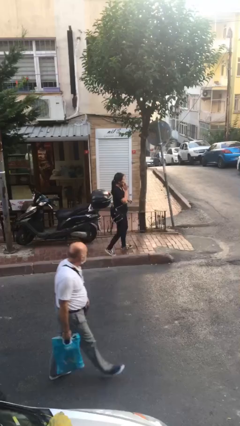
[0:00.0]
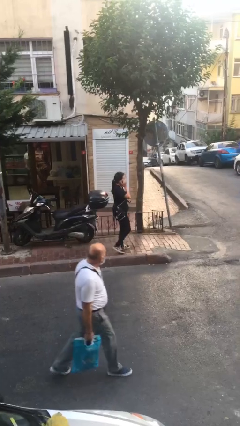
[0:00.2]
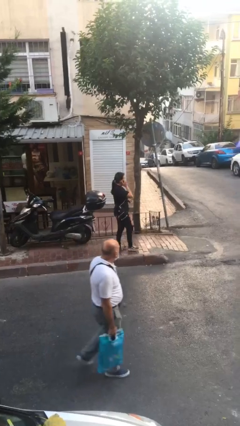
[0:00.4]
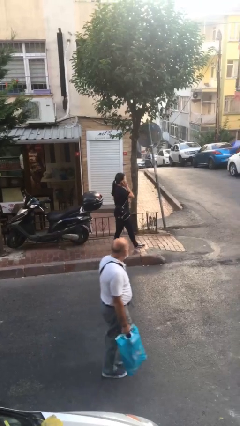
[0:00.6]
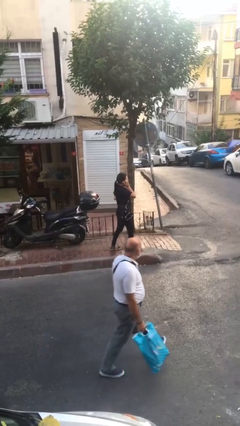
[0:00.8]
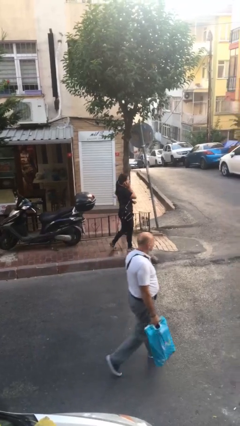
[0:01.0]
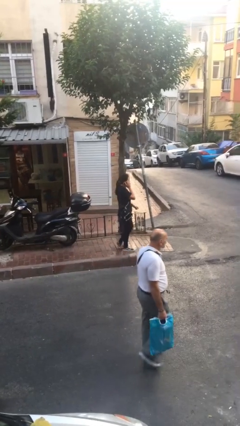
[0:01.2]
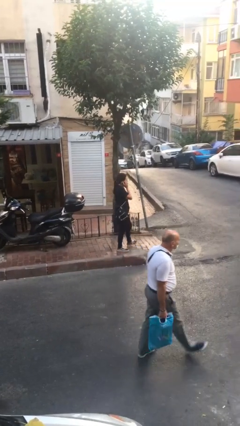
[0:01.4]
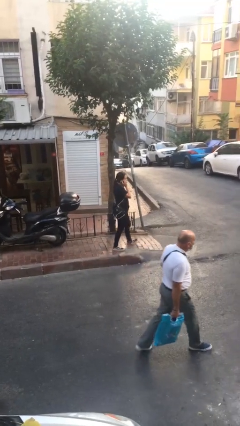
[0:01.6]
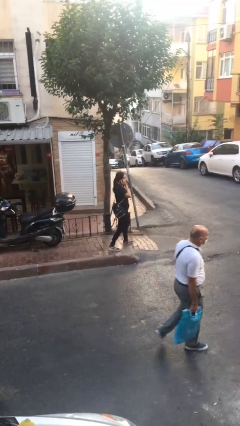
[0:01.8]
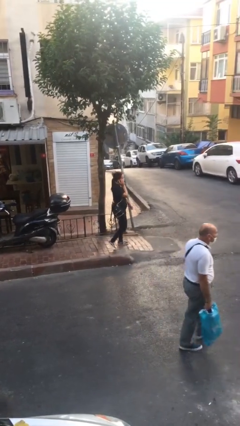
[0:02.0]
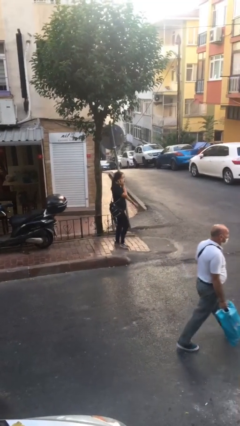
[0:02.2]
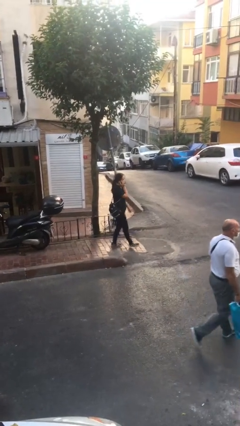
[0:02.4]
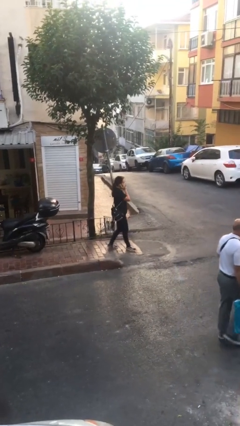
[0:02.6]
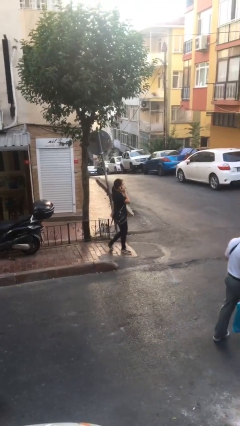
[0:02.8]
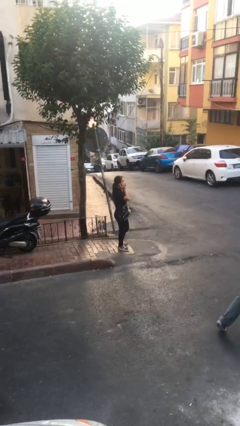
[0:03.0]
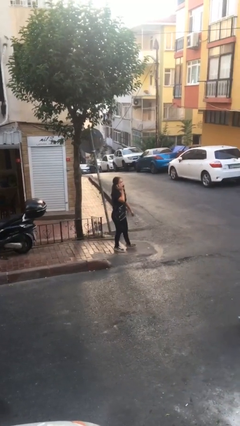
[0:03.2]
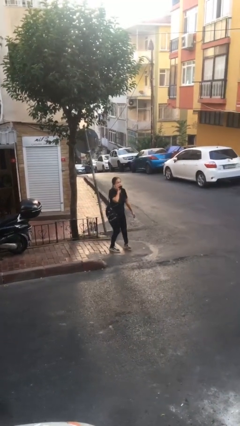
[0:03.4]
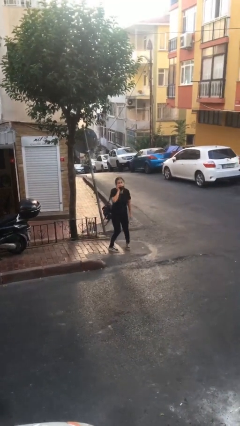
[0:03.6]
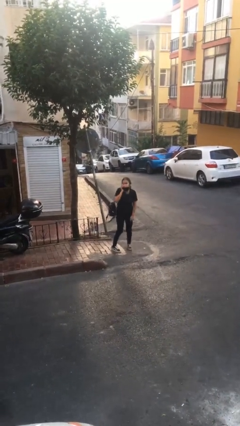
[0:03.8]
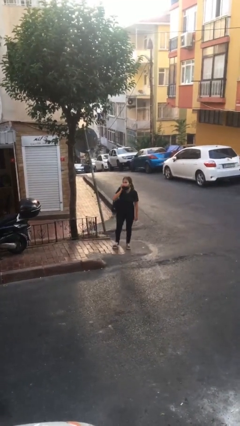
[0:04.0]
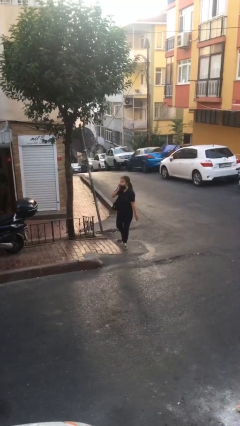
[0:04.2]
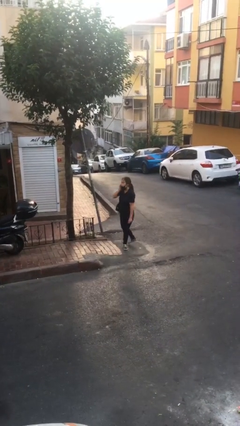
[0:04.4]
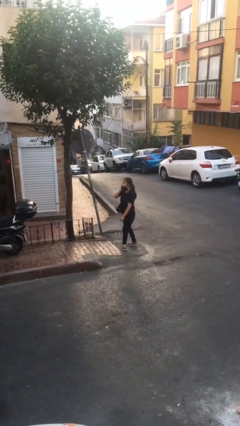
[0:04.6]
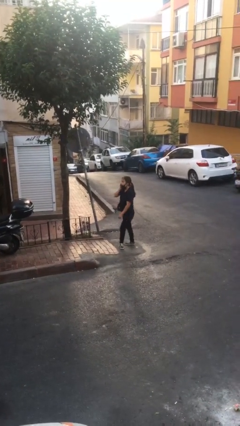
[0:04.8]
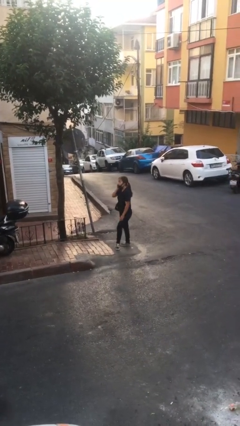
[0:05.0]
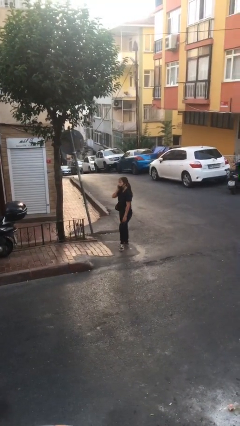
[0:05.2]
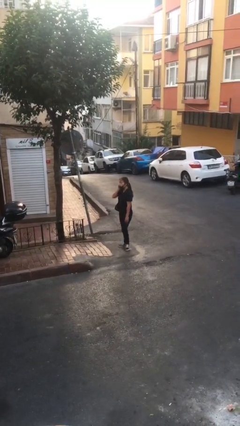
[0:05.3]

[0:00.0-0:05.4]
person talks on phone

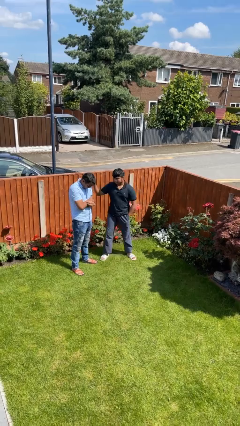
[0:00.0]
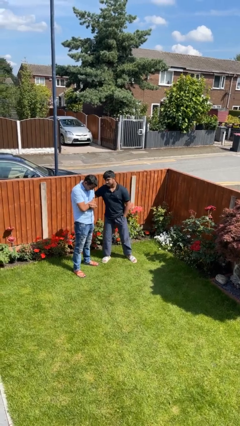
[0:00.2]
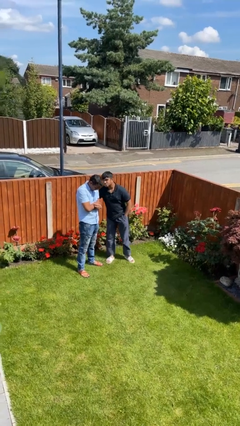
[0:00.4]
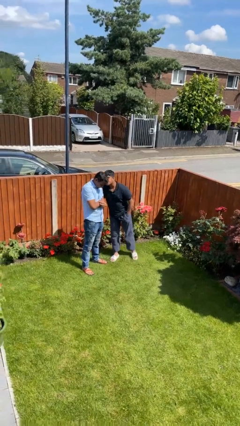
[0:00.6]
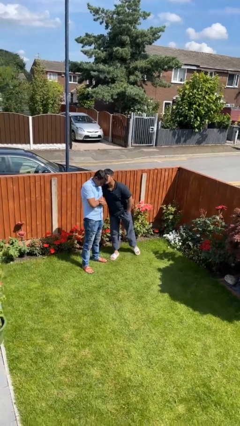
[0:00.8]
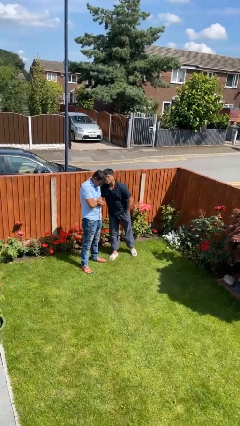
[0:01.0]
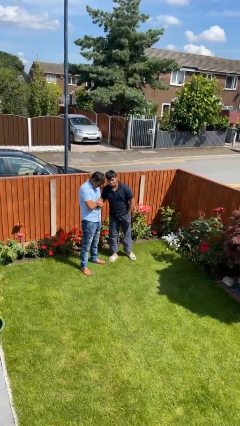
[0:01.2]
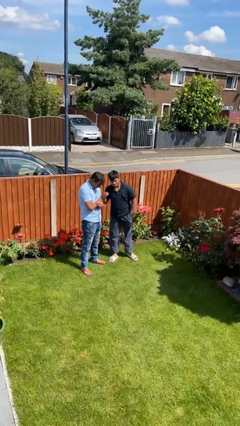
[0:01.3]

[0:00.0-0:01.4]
person kisses cheek of person

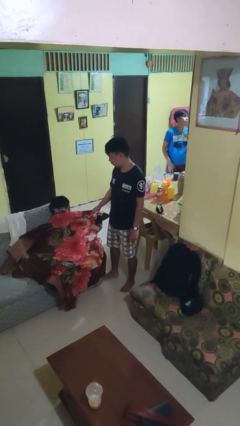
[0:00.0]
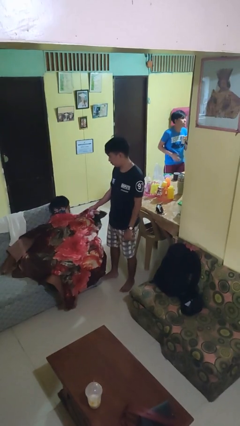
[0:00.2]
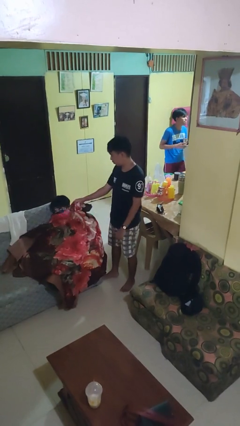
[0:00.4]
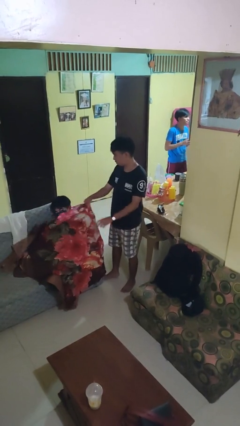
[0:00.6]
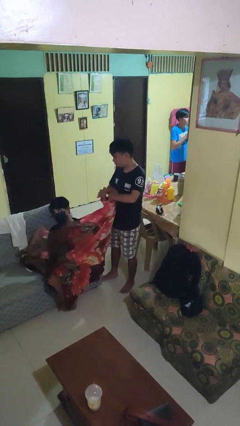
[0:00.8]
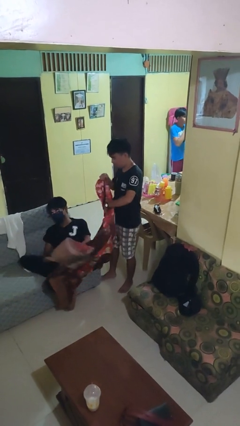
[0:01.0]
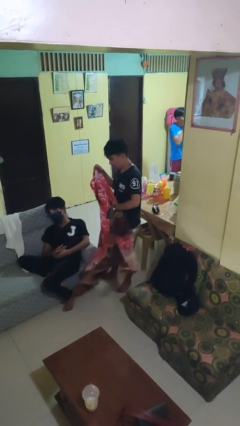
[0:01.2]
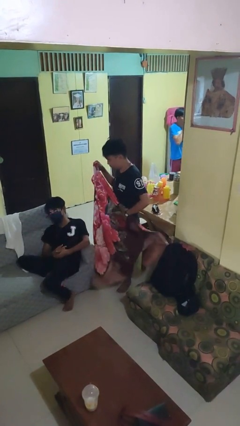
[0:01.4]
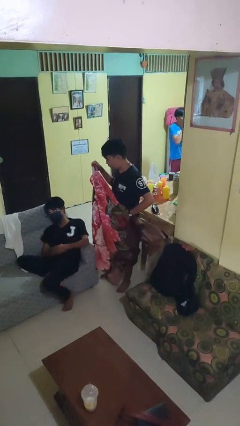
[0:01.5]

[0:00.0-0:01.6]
person uncovers friend with blanket

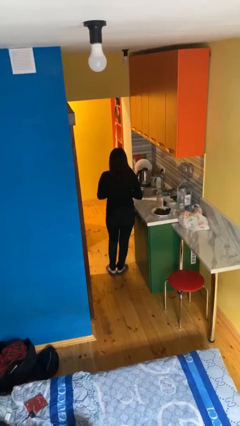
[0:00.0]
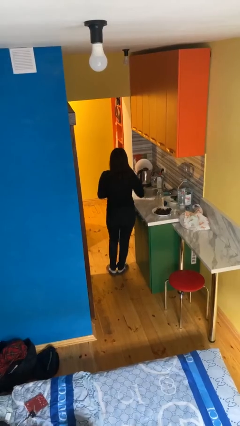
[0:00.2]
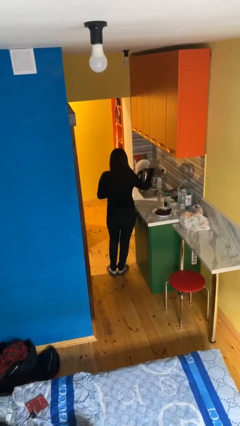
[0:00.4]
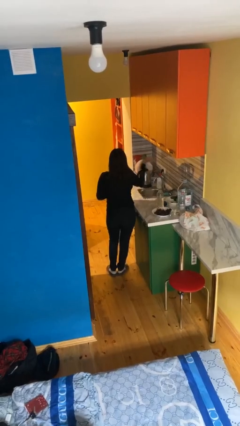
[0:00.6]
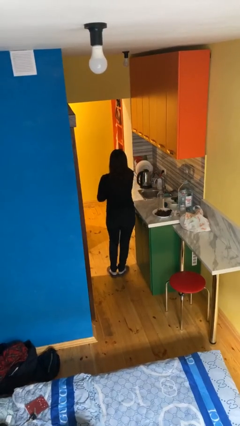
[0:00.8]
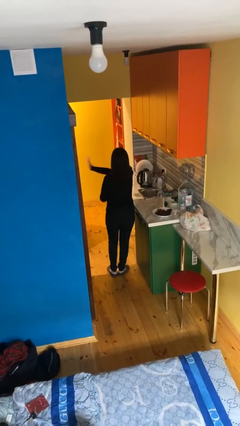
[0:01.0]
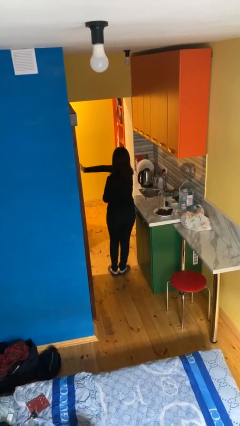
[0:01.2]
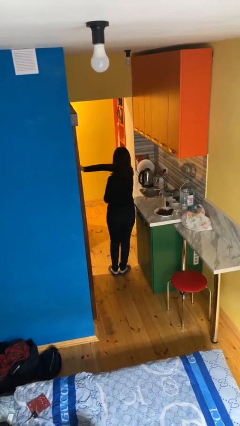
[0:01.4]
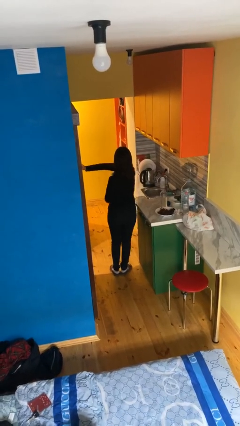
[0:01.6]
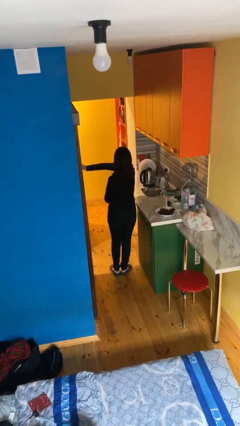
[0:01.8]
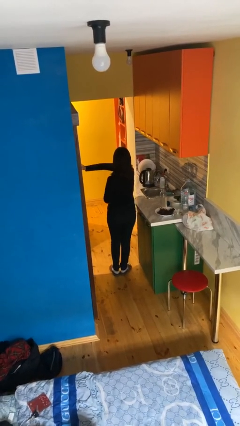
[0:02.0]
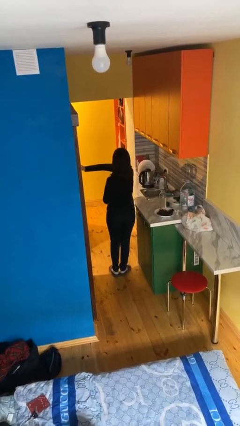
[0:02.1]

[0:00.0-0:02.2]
person gestures swipe left

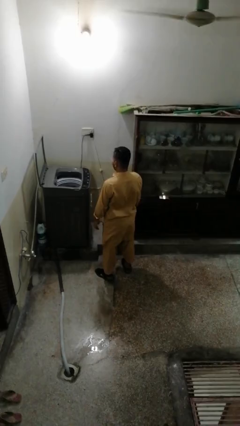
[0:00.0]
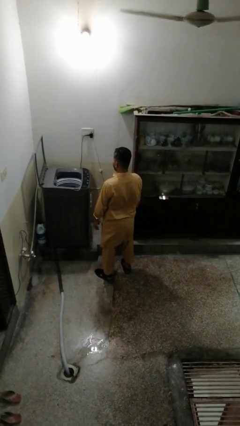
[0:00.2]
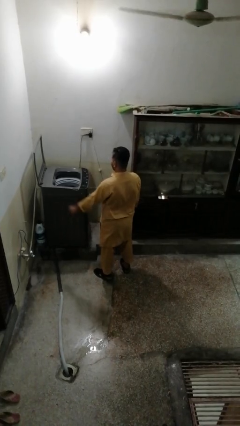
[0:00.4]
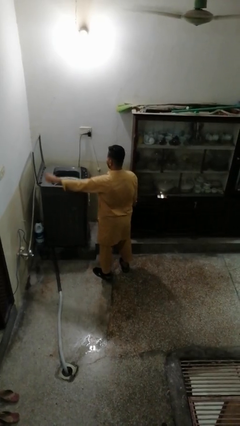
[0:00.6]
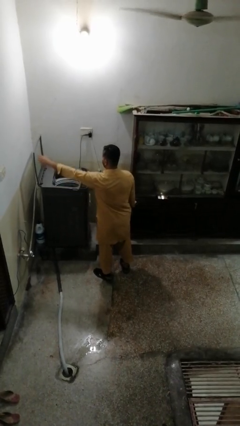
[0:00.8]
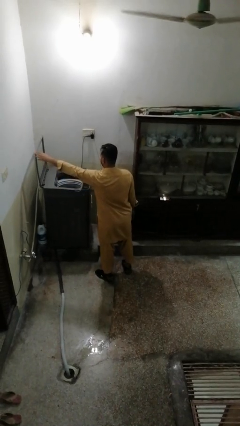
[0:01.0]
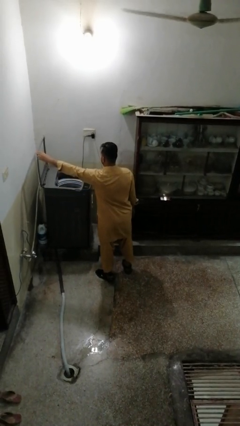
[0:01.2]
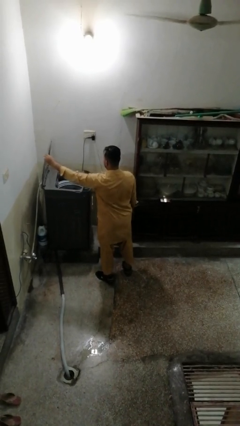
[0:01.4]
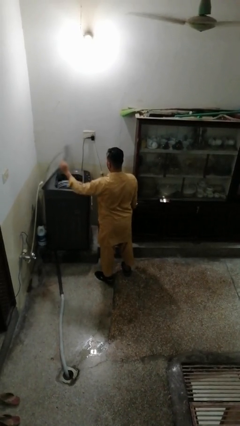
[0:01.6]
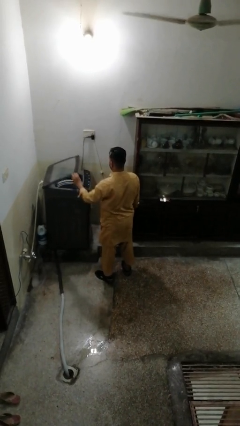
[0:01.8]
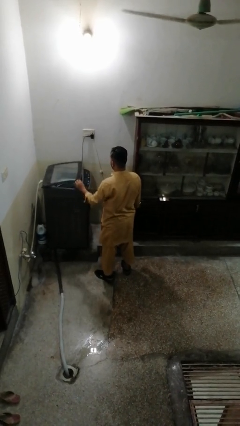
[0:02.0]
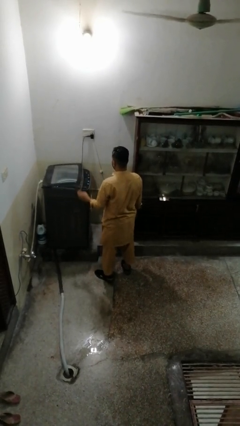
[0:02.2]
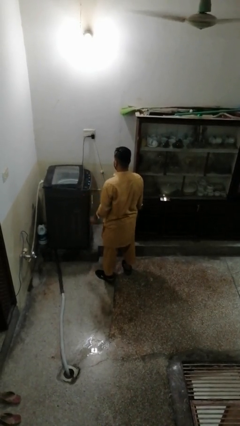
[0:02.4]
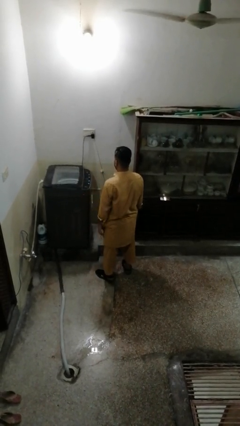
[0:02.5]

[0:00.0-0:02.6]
person closes clothes washer

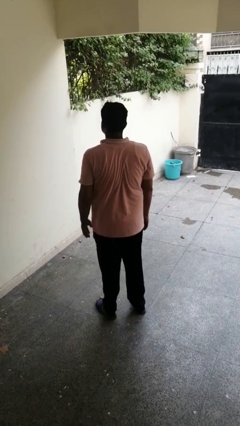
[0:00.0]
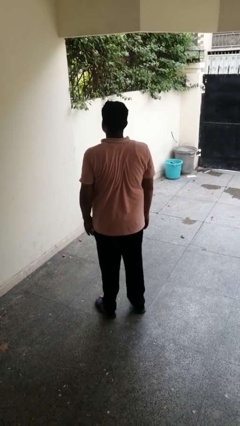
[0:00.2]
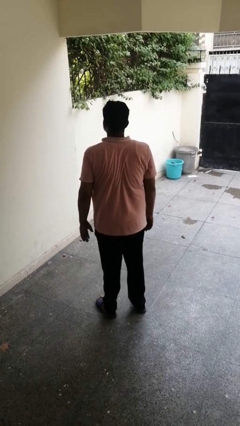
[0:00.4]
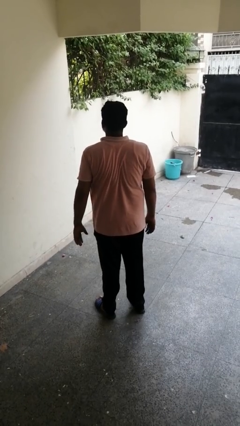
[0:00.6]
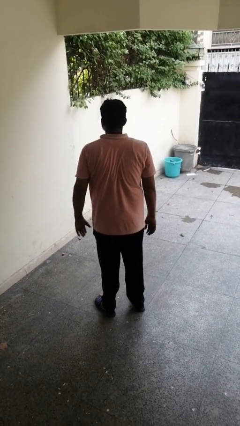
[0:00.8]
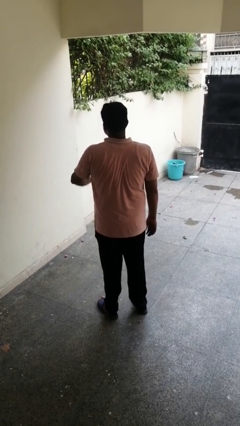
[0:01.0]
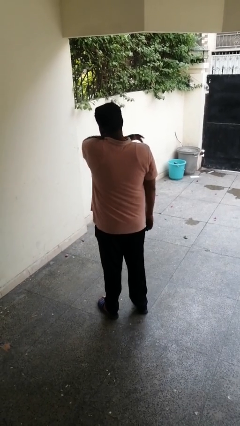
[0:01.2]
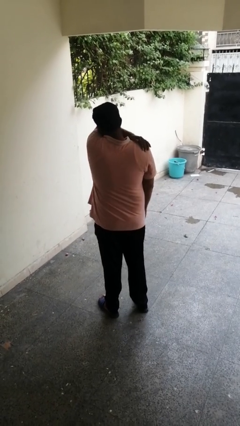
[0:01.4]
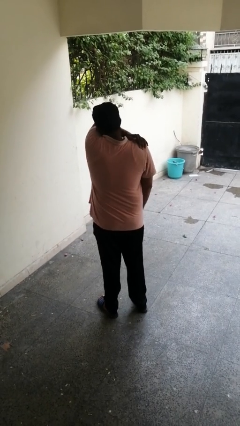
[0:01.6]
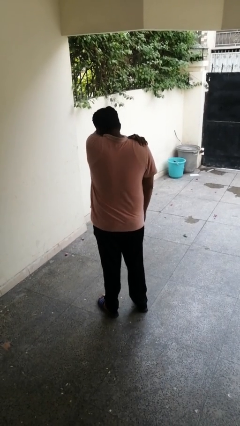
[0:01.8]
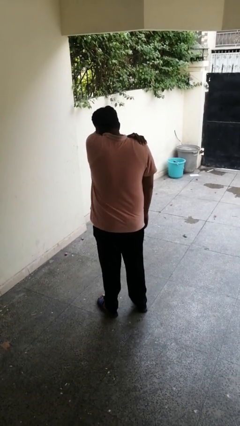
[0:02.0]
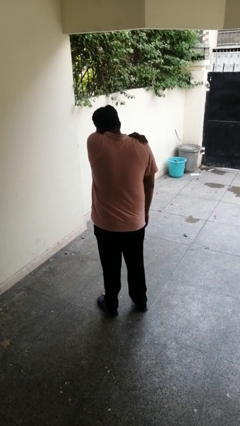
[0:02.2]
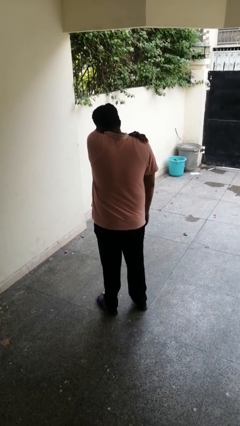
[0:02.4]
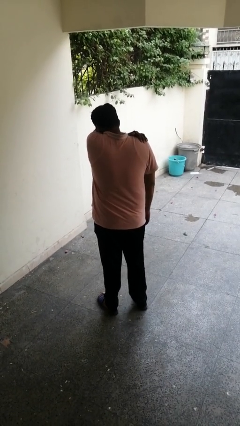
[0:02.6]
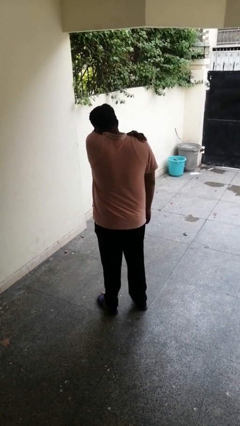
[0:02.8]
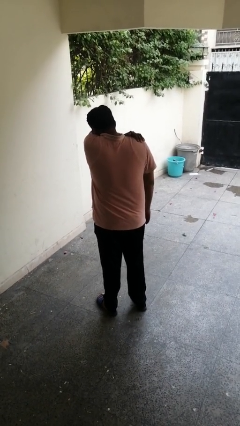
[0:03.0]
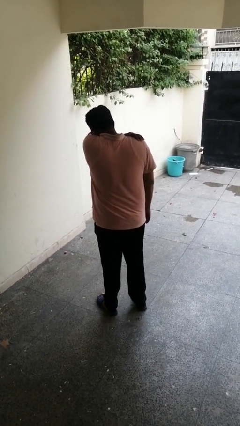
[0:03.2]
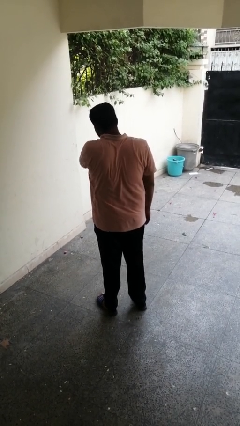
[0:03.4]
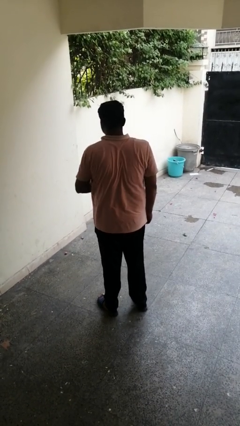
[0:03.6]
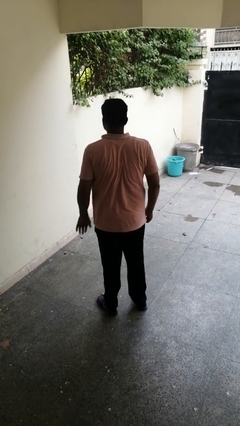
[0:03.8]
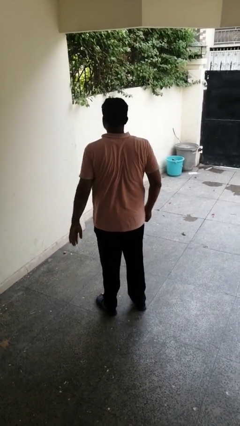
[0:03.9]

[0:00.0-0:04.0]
person sneezes into arm

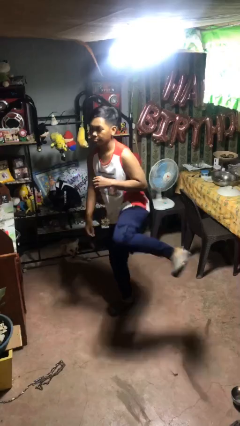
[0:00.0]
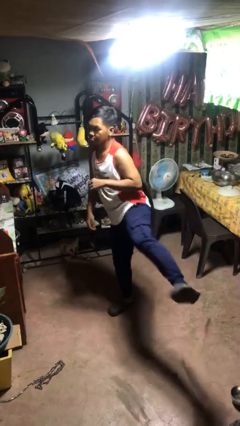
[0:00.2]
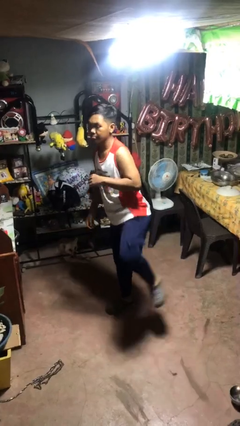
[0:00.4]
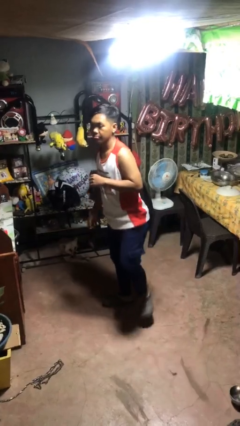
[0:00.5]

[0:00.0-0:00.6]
person karate kicks
